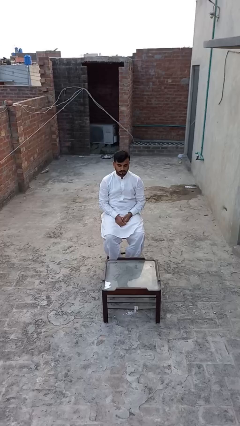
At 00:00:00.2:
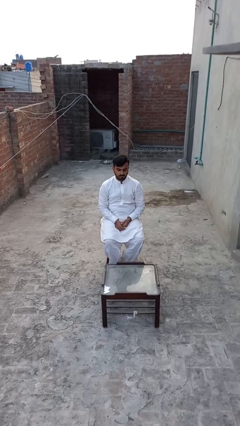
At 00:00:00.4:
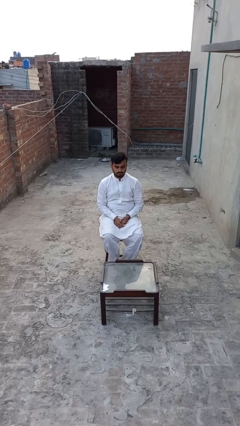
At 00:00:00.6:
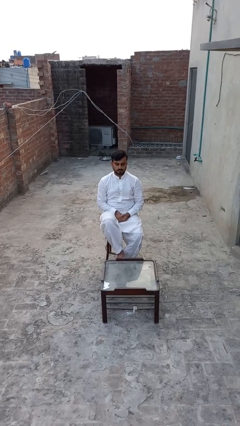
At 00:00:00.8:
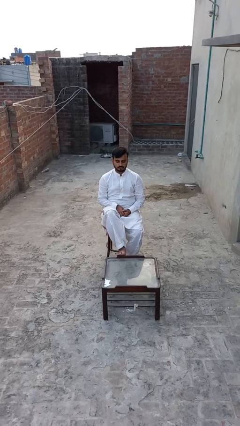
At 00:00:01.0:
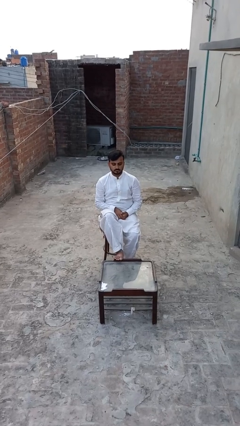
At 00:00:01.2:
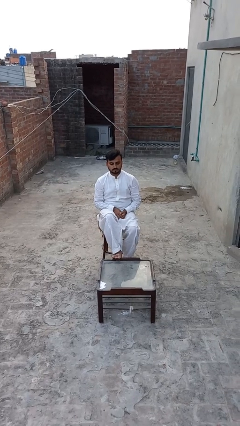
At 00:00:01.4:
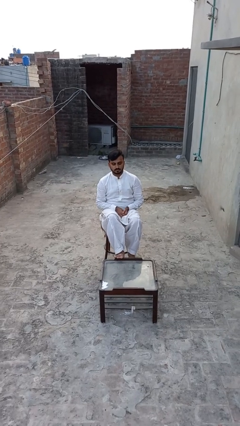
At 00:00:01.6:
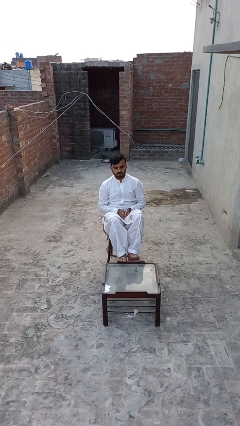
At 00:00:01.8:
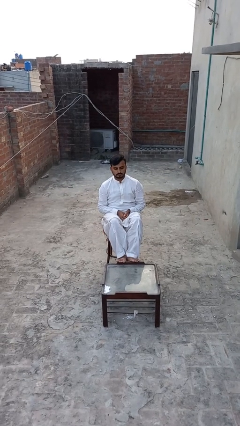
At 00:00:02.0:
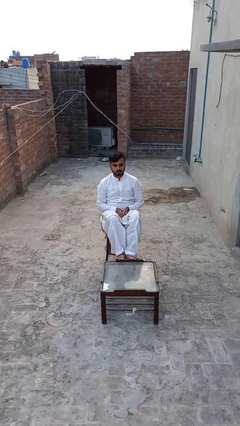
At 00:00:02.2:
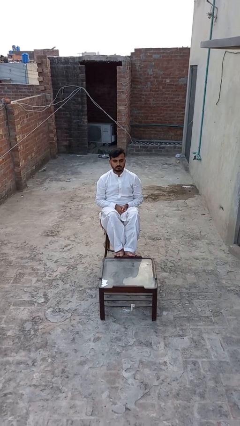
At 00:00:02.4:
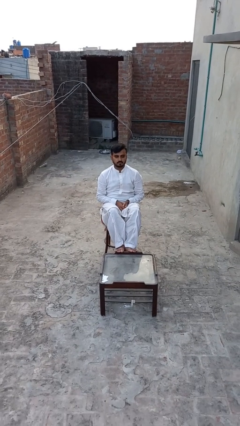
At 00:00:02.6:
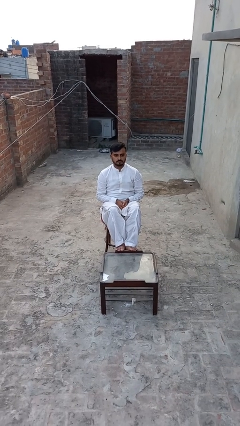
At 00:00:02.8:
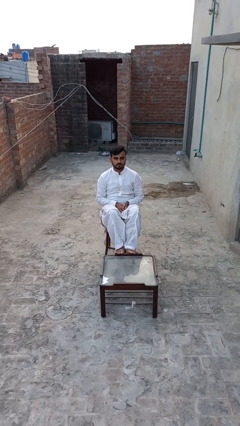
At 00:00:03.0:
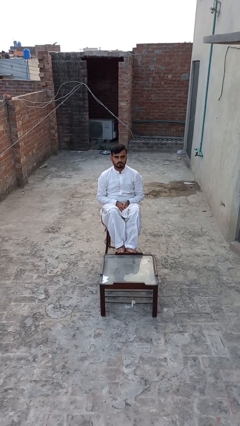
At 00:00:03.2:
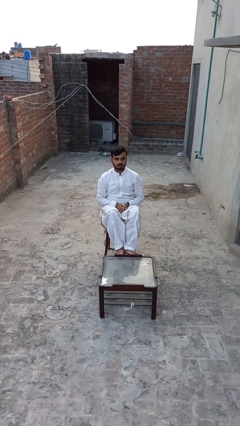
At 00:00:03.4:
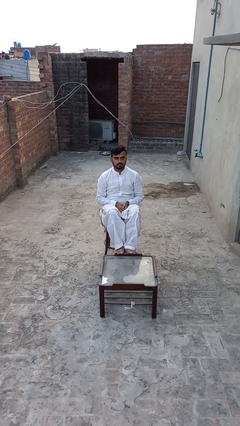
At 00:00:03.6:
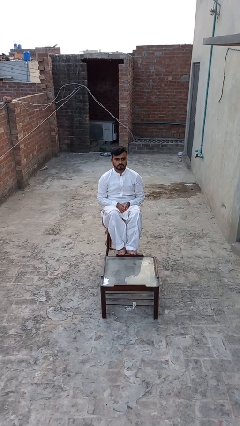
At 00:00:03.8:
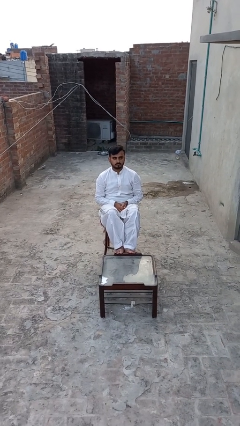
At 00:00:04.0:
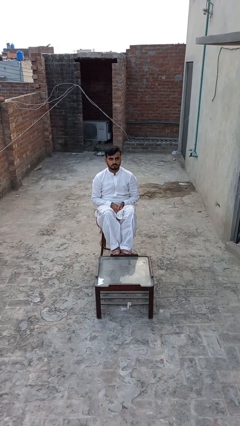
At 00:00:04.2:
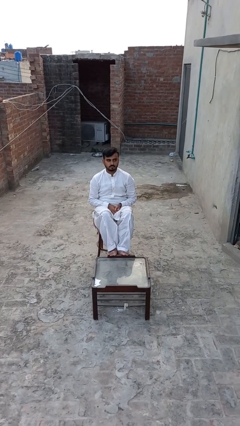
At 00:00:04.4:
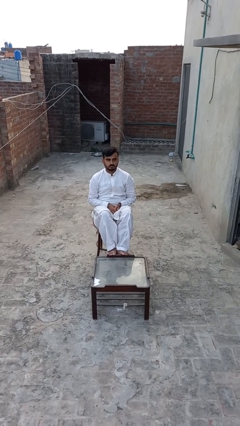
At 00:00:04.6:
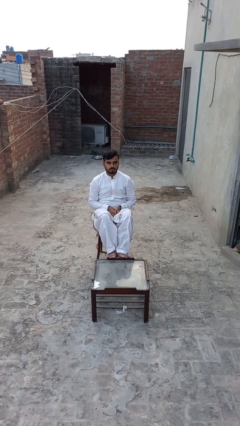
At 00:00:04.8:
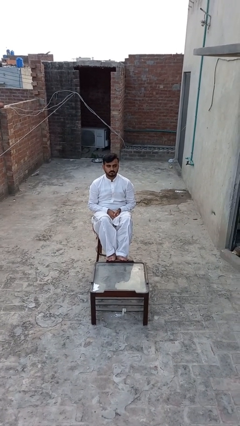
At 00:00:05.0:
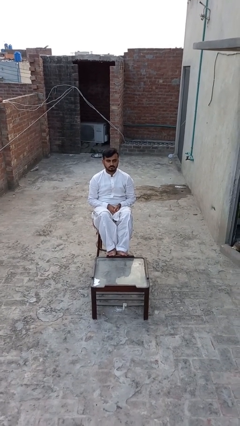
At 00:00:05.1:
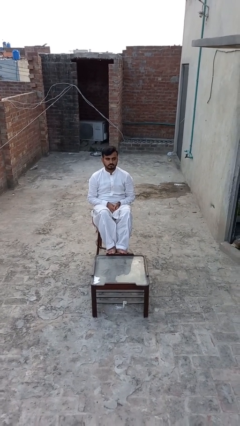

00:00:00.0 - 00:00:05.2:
person puts feet up

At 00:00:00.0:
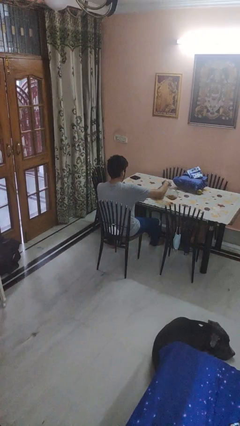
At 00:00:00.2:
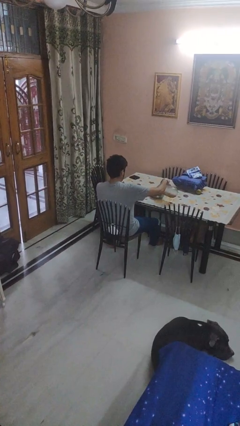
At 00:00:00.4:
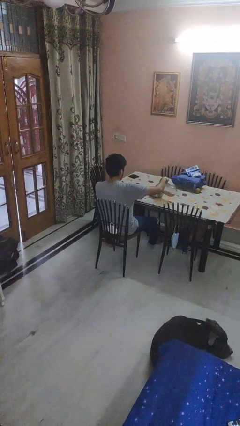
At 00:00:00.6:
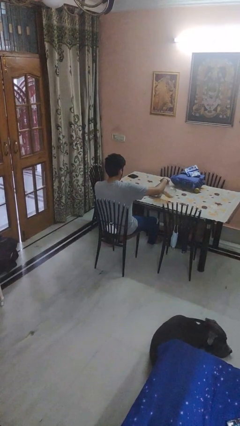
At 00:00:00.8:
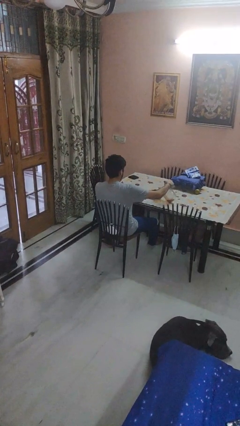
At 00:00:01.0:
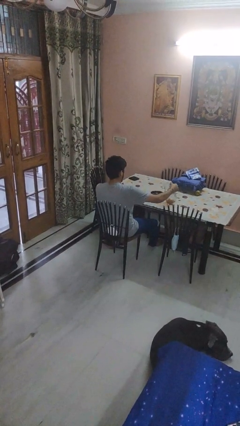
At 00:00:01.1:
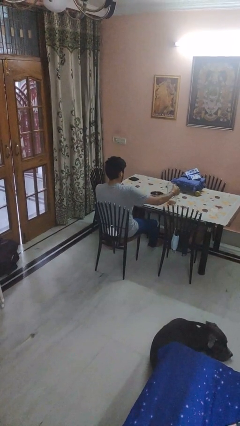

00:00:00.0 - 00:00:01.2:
person pours into bowl

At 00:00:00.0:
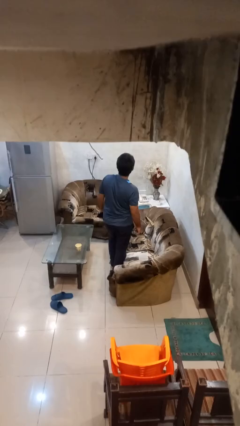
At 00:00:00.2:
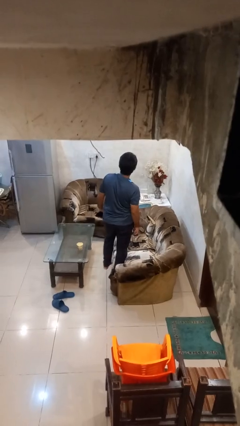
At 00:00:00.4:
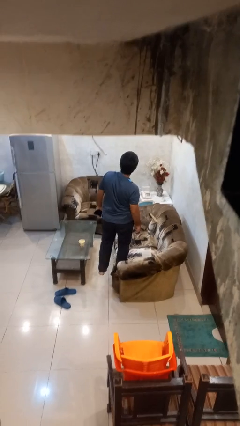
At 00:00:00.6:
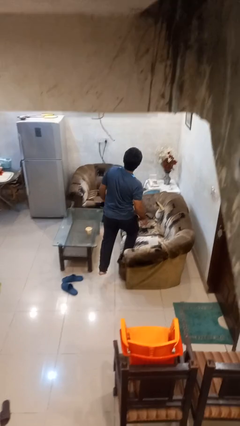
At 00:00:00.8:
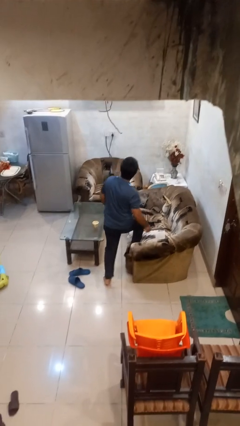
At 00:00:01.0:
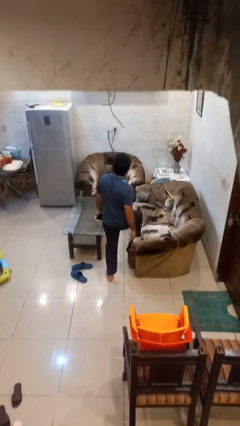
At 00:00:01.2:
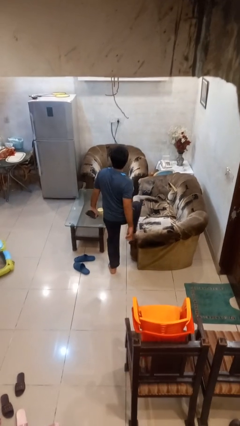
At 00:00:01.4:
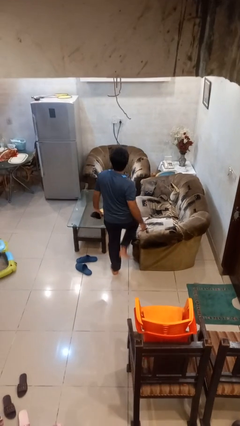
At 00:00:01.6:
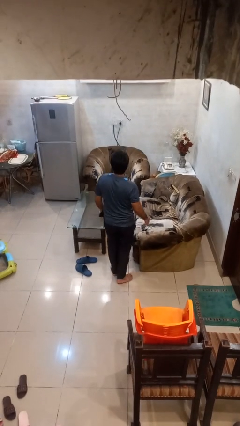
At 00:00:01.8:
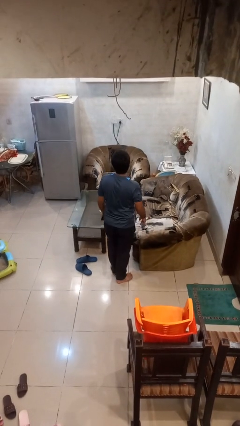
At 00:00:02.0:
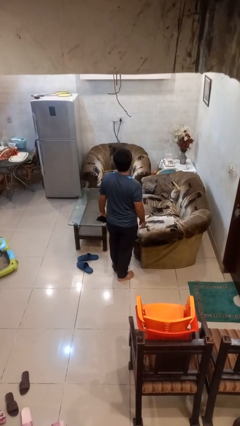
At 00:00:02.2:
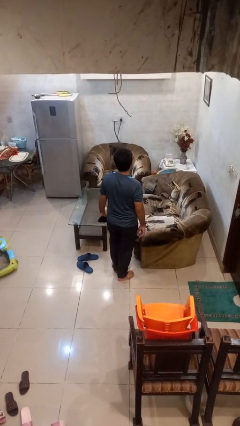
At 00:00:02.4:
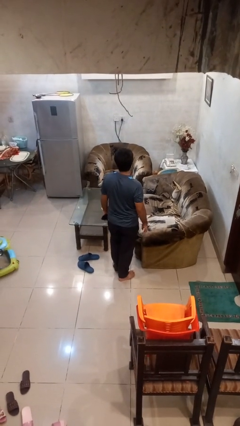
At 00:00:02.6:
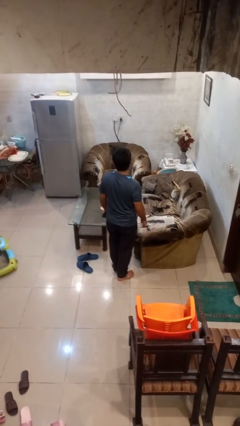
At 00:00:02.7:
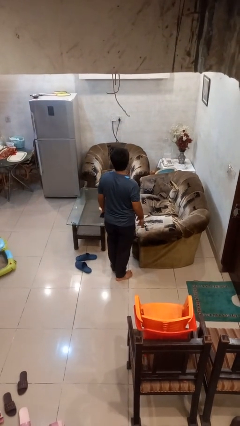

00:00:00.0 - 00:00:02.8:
person climbs off couch

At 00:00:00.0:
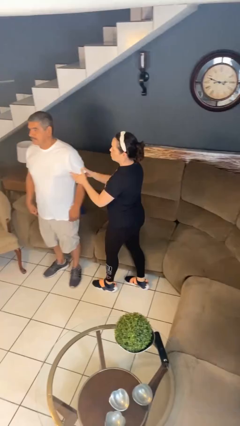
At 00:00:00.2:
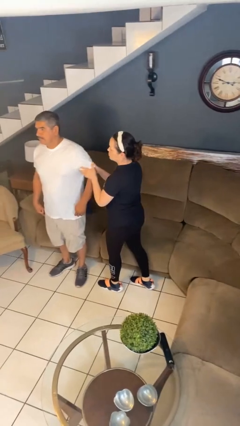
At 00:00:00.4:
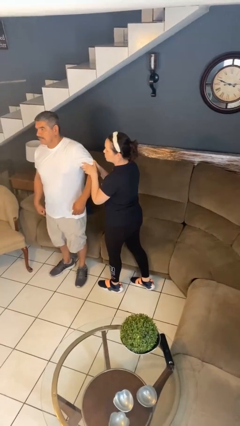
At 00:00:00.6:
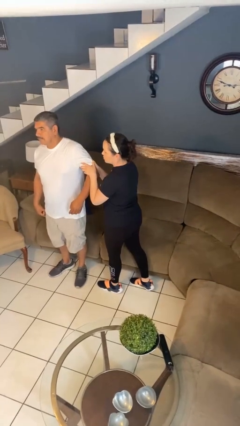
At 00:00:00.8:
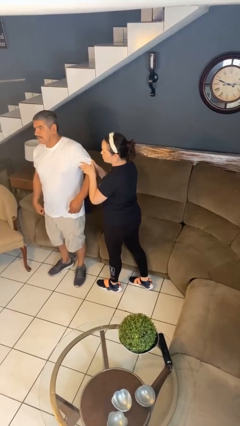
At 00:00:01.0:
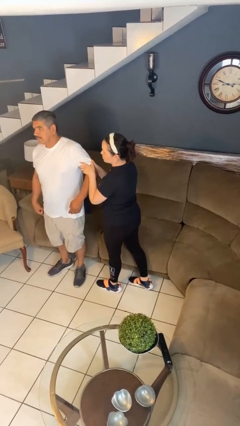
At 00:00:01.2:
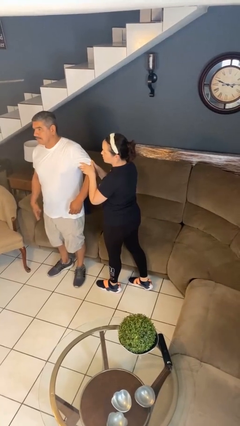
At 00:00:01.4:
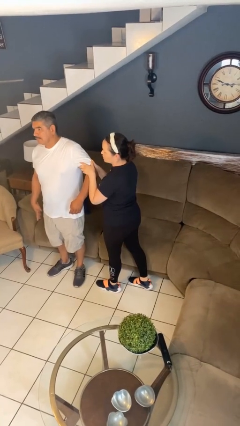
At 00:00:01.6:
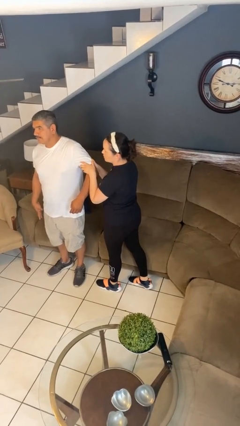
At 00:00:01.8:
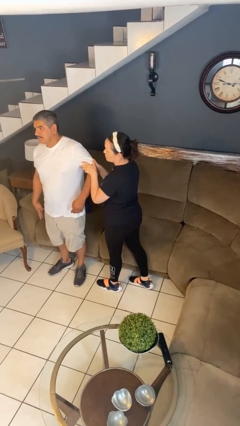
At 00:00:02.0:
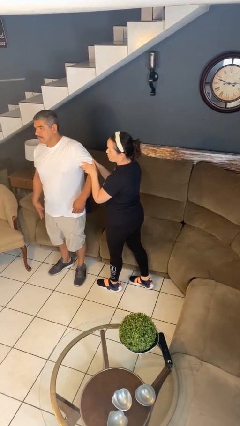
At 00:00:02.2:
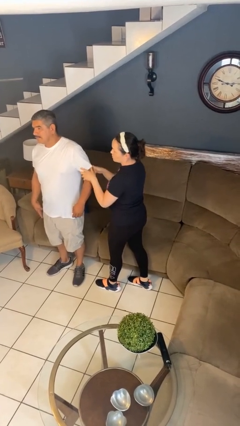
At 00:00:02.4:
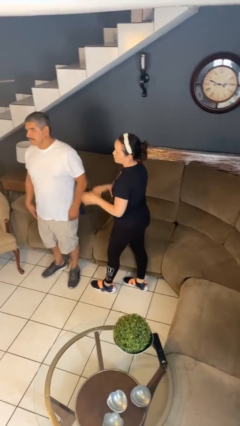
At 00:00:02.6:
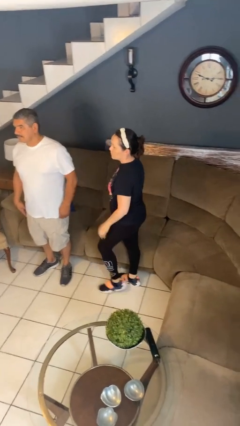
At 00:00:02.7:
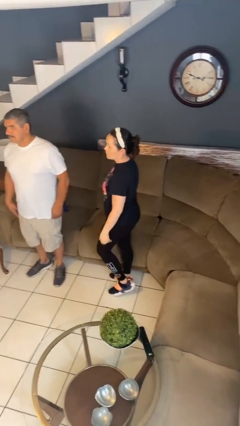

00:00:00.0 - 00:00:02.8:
person grabs person by bicep

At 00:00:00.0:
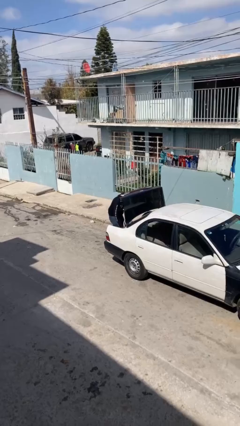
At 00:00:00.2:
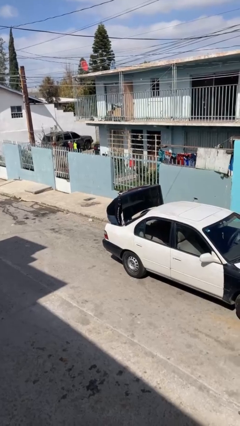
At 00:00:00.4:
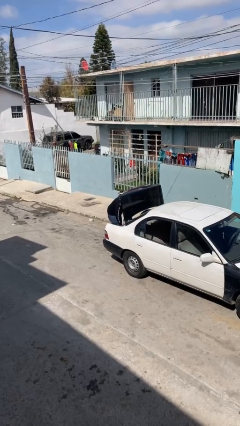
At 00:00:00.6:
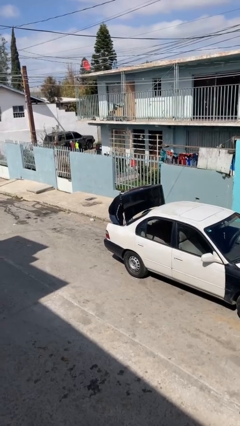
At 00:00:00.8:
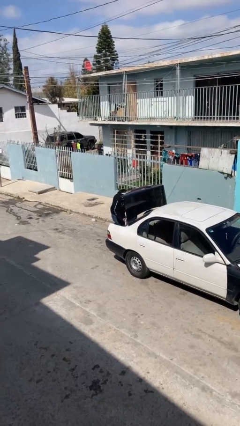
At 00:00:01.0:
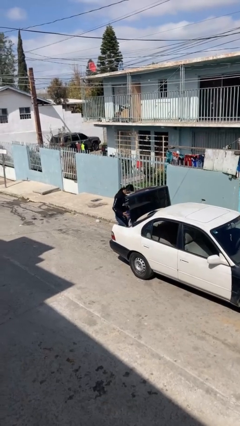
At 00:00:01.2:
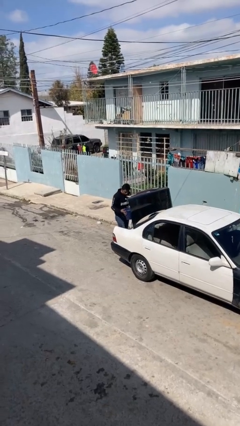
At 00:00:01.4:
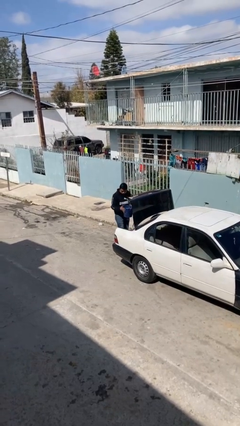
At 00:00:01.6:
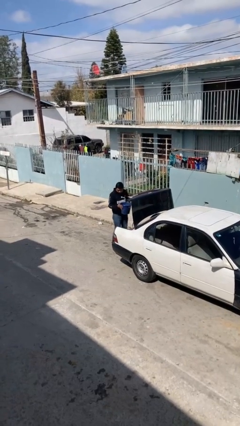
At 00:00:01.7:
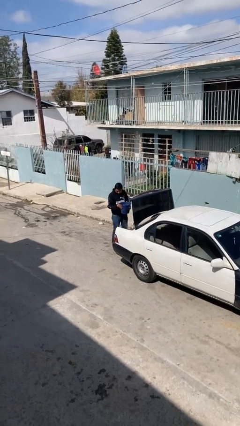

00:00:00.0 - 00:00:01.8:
person unloads car

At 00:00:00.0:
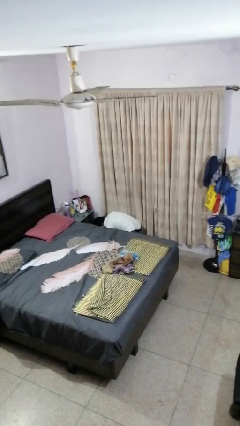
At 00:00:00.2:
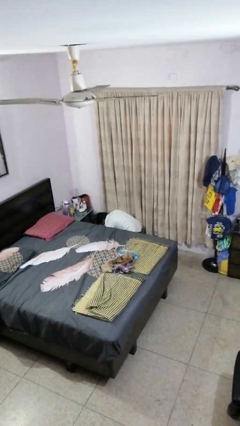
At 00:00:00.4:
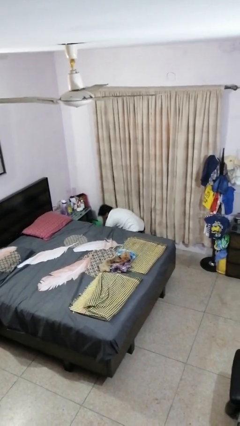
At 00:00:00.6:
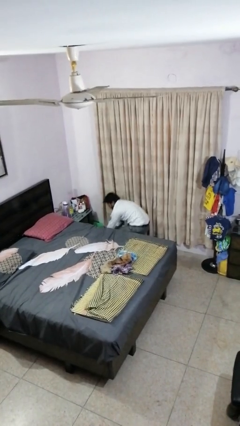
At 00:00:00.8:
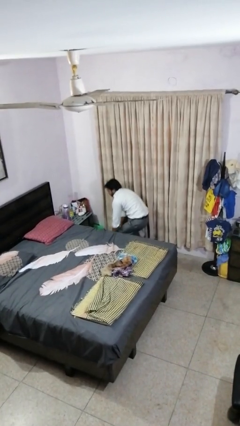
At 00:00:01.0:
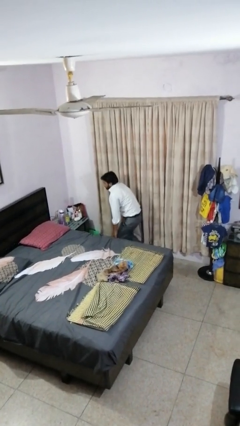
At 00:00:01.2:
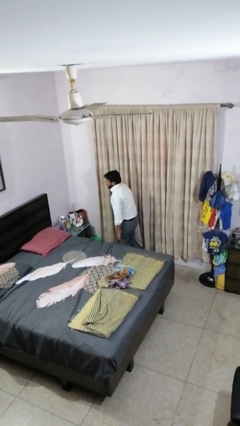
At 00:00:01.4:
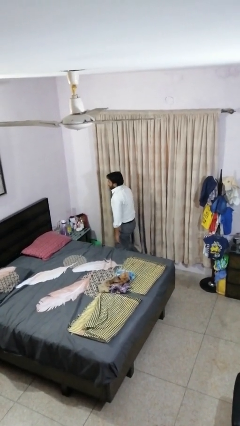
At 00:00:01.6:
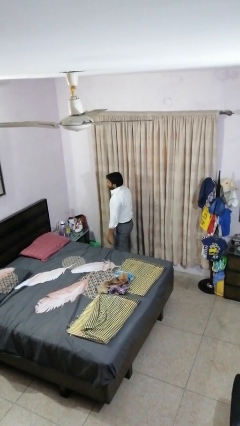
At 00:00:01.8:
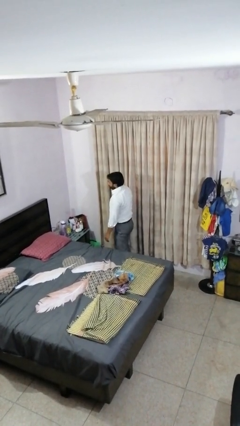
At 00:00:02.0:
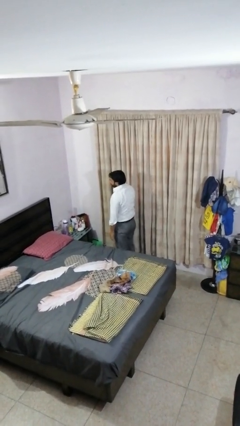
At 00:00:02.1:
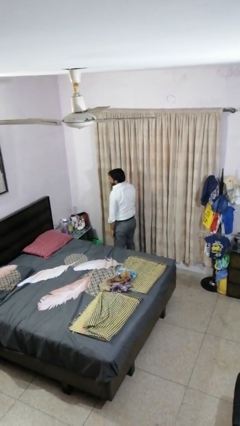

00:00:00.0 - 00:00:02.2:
person stands up from floor

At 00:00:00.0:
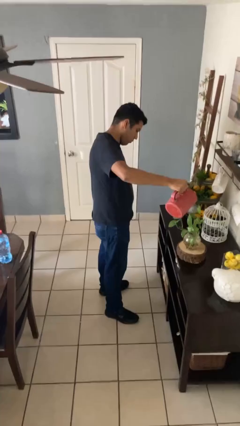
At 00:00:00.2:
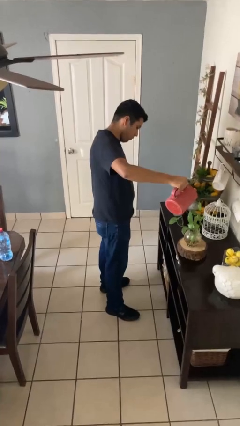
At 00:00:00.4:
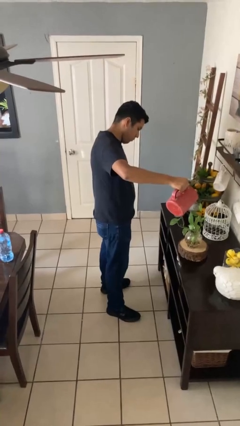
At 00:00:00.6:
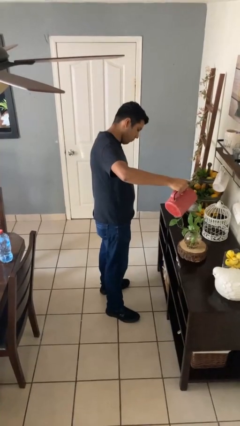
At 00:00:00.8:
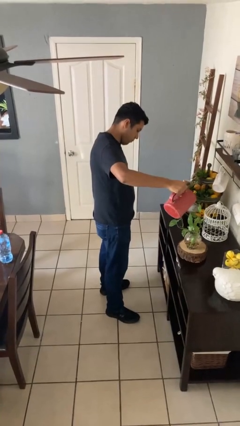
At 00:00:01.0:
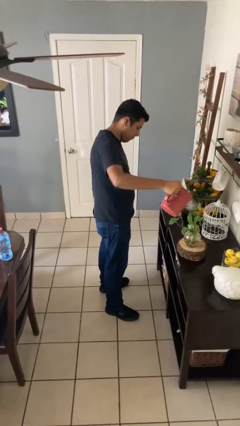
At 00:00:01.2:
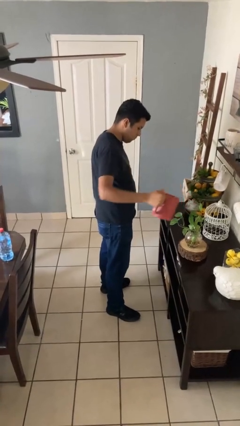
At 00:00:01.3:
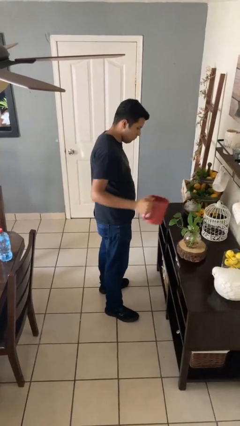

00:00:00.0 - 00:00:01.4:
person waters houseplant
